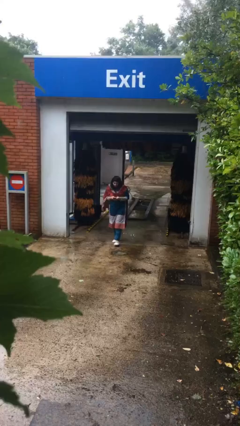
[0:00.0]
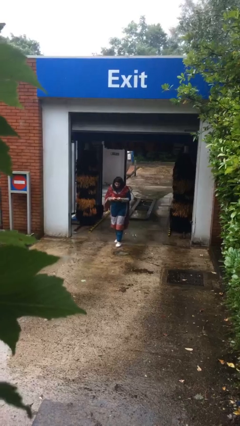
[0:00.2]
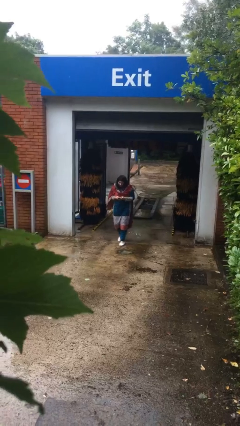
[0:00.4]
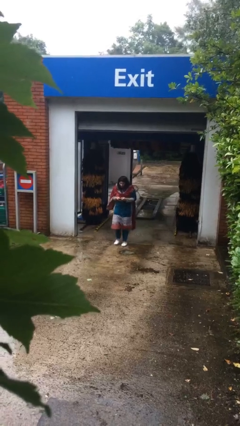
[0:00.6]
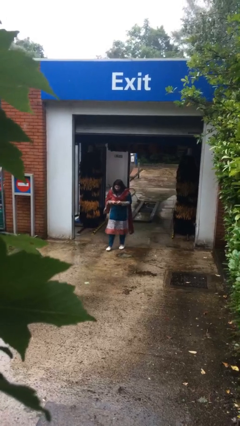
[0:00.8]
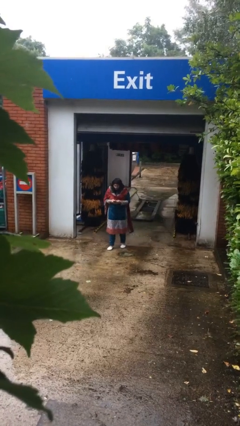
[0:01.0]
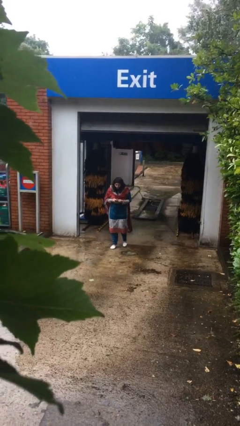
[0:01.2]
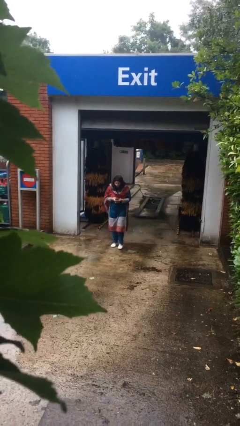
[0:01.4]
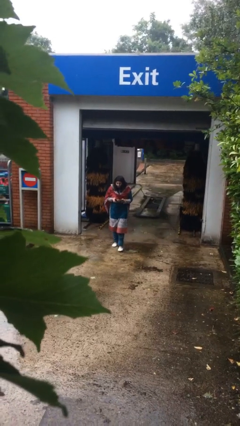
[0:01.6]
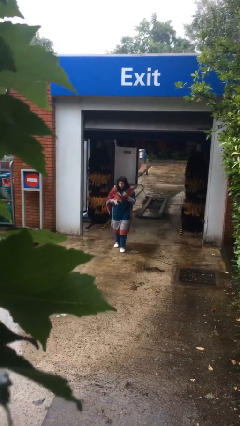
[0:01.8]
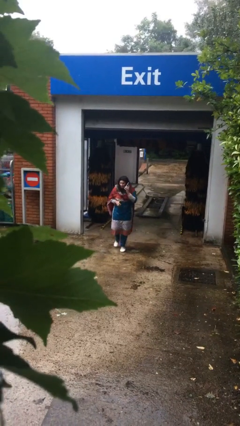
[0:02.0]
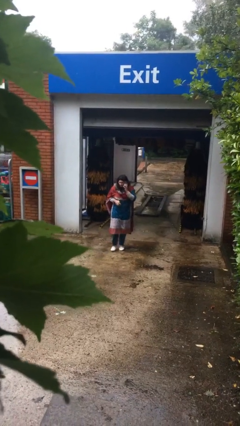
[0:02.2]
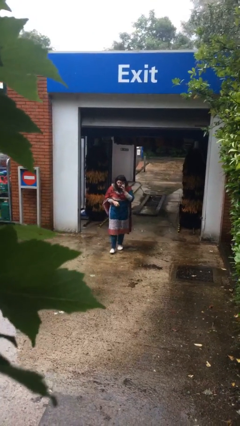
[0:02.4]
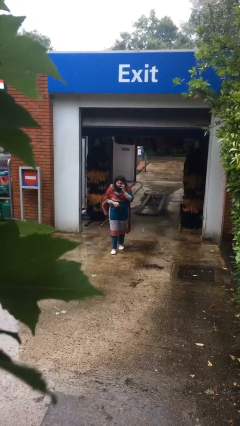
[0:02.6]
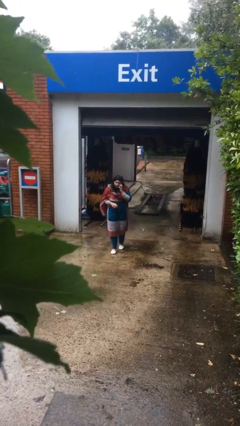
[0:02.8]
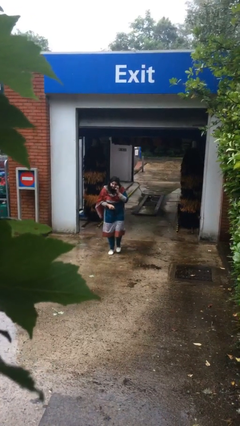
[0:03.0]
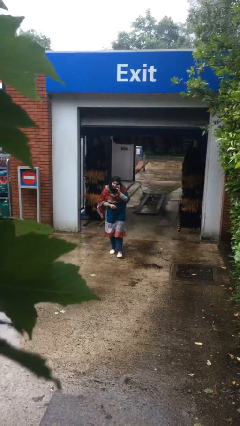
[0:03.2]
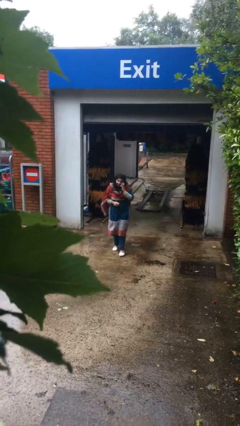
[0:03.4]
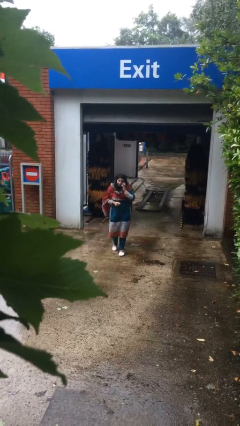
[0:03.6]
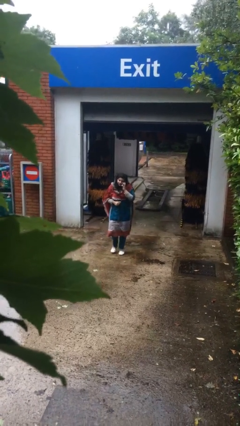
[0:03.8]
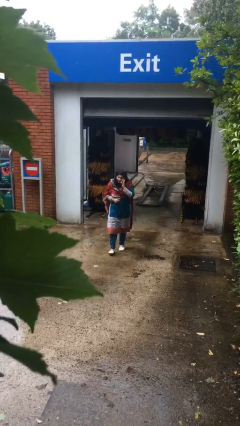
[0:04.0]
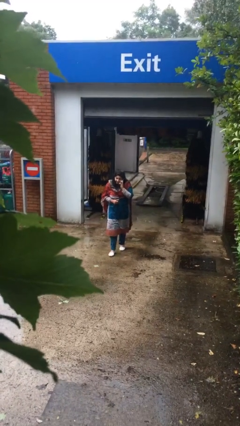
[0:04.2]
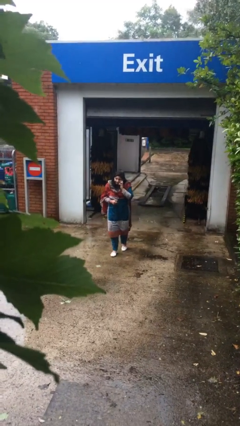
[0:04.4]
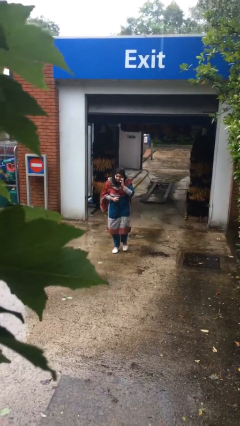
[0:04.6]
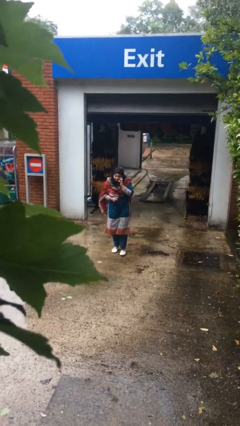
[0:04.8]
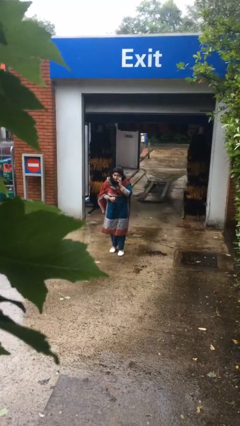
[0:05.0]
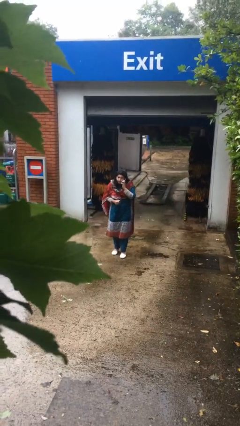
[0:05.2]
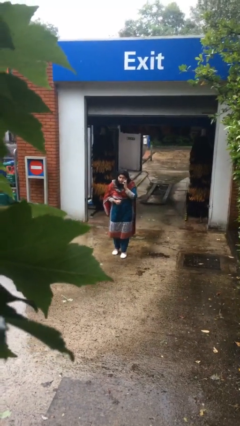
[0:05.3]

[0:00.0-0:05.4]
person talks on phone

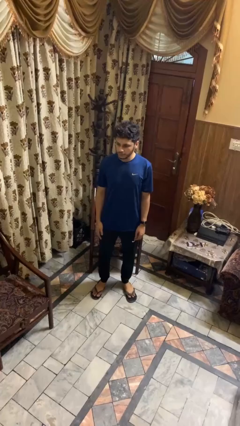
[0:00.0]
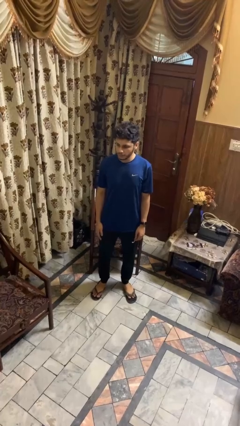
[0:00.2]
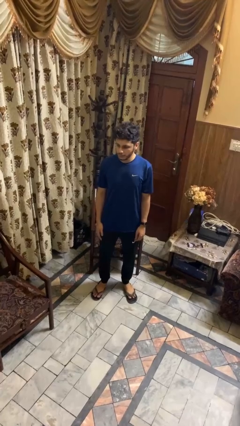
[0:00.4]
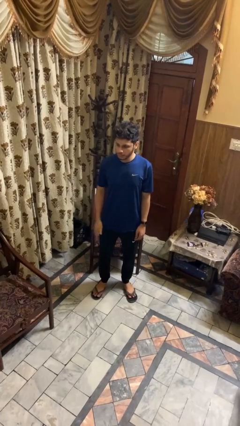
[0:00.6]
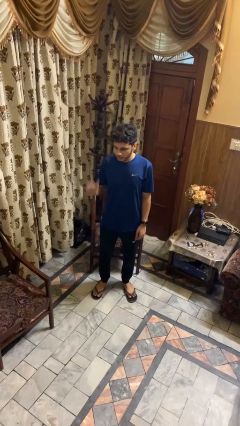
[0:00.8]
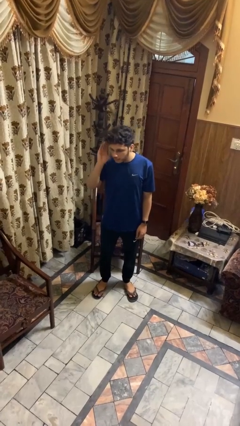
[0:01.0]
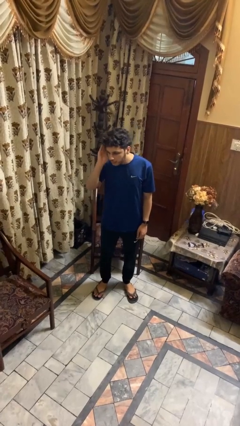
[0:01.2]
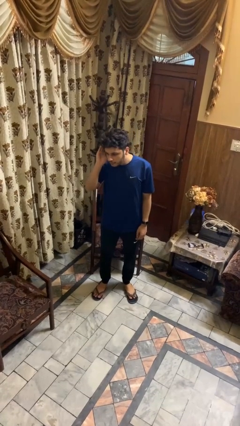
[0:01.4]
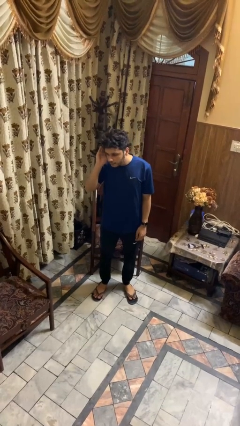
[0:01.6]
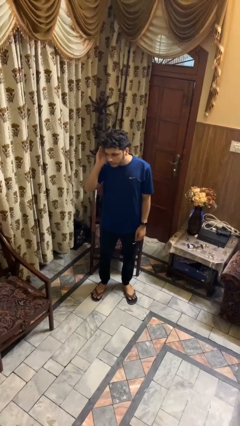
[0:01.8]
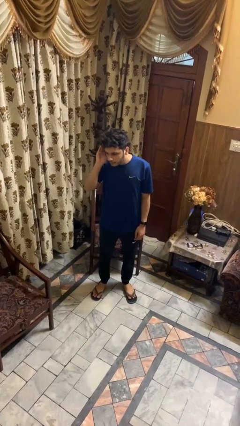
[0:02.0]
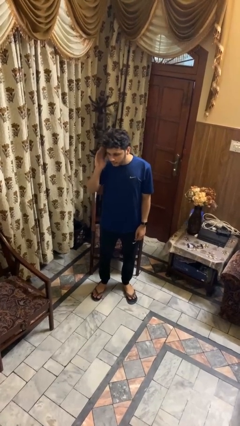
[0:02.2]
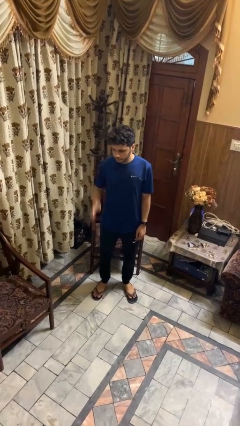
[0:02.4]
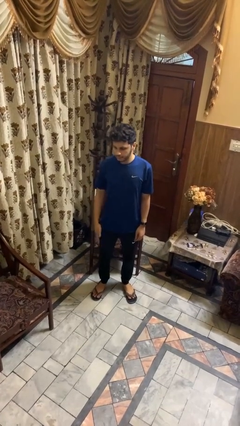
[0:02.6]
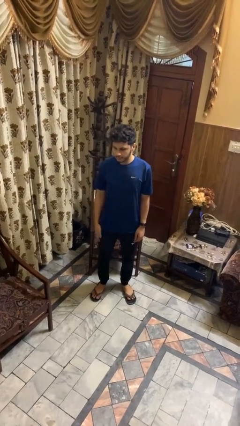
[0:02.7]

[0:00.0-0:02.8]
person gestures listen closely

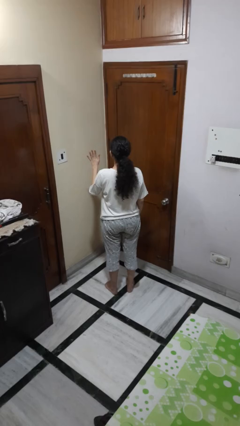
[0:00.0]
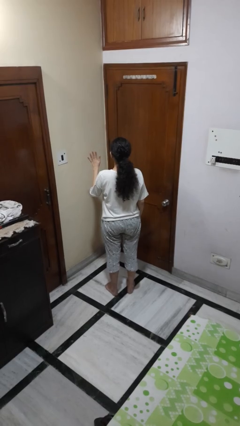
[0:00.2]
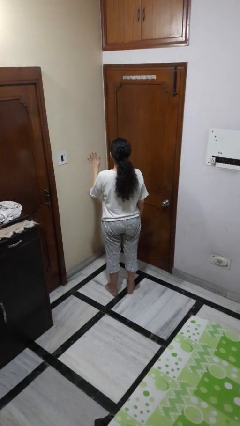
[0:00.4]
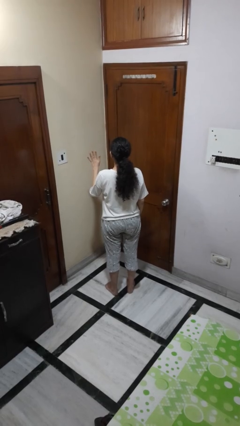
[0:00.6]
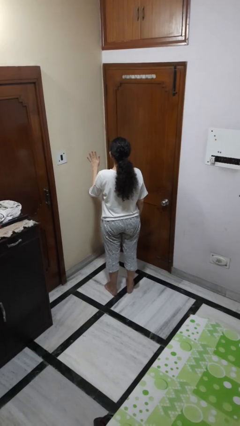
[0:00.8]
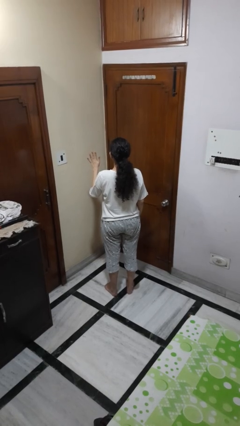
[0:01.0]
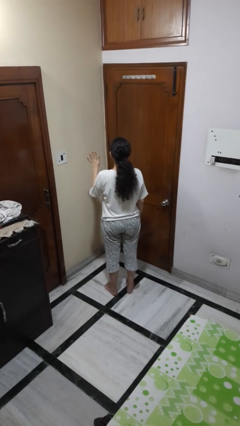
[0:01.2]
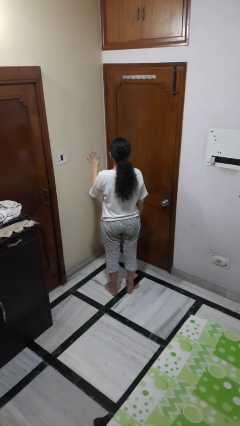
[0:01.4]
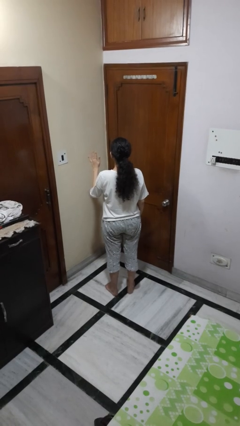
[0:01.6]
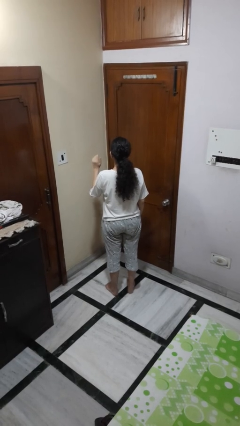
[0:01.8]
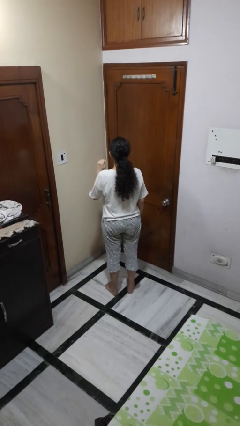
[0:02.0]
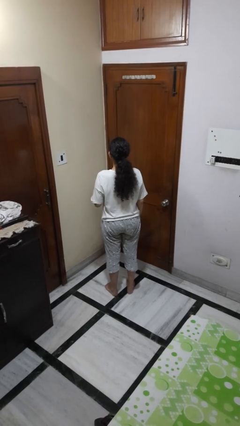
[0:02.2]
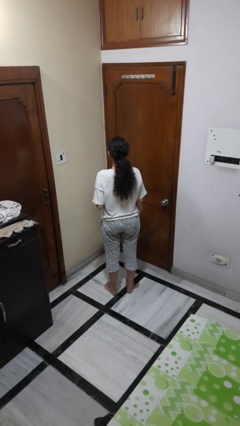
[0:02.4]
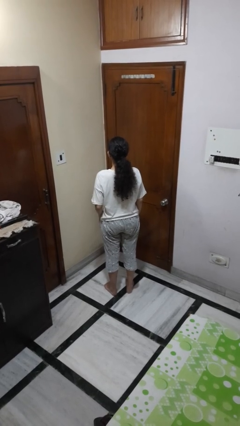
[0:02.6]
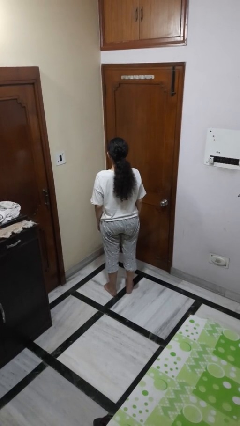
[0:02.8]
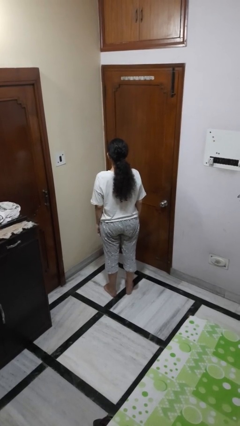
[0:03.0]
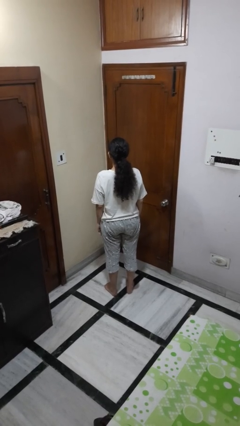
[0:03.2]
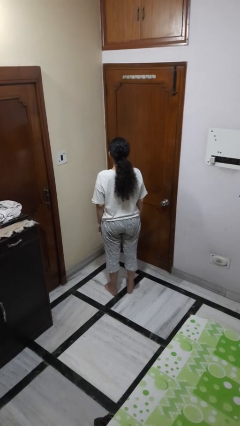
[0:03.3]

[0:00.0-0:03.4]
person gestures number five

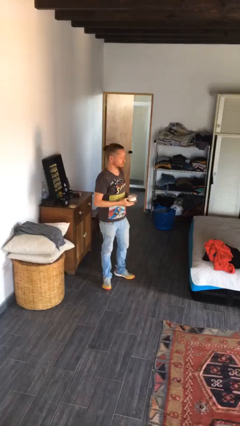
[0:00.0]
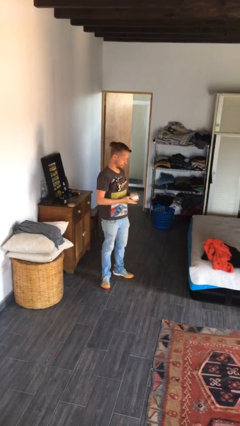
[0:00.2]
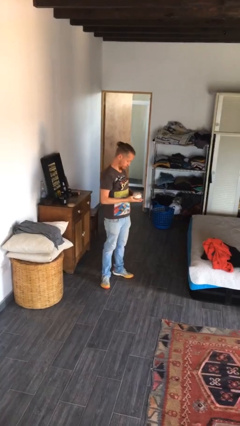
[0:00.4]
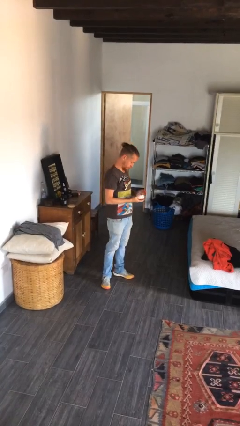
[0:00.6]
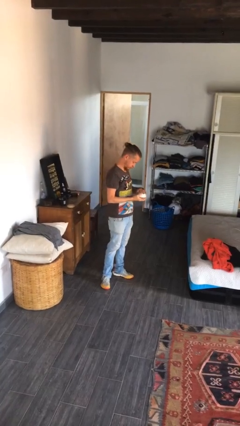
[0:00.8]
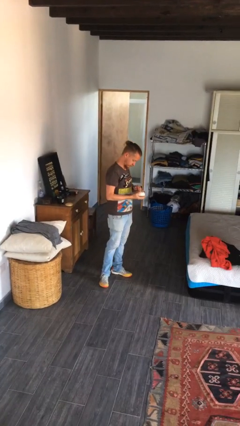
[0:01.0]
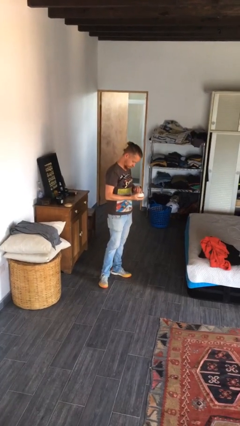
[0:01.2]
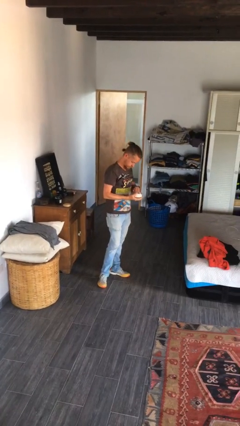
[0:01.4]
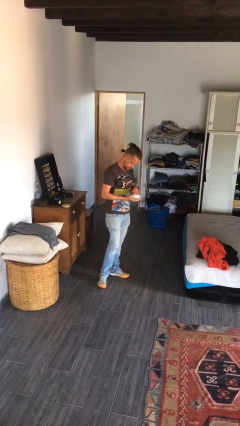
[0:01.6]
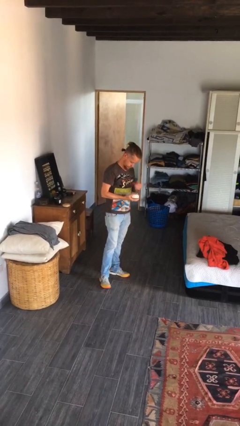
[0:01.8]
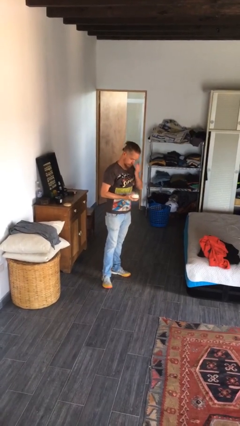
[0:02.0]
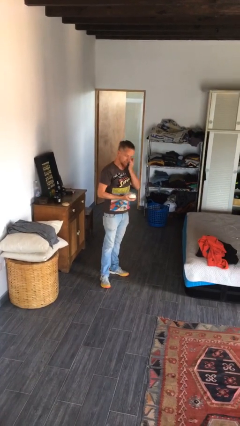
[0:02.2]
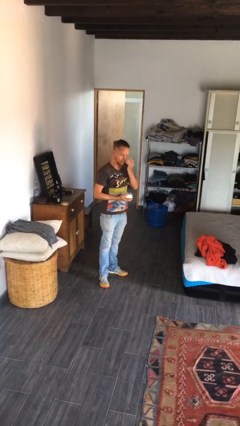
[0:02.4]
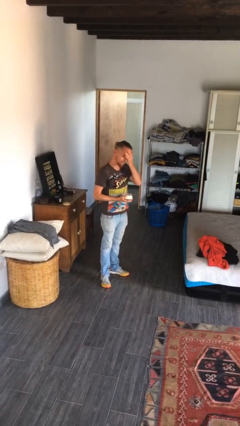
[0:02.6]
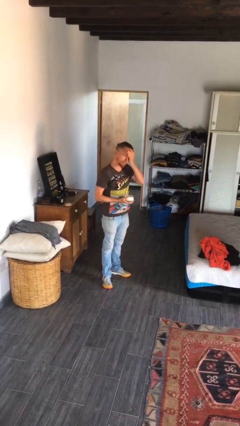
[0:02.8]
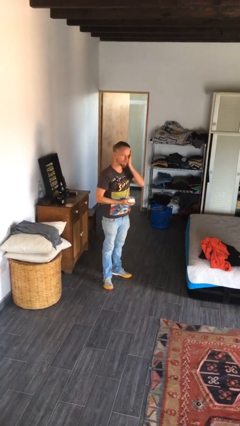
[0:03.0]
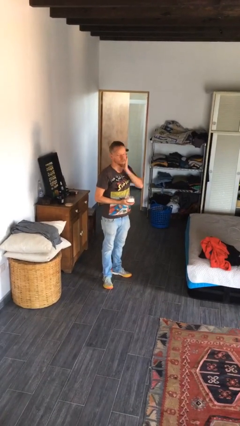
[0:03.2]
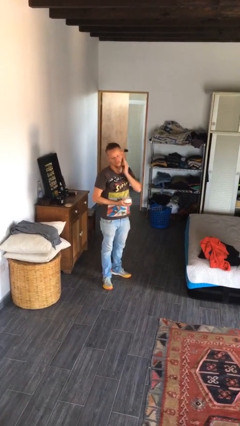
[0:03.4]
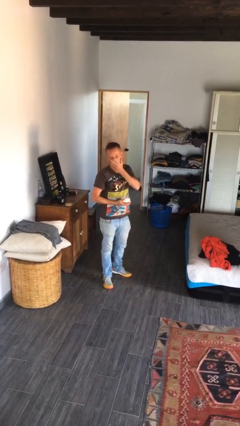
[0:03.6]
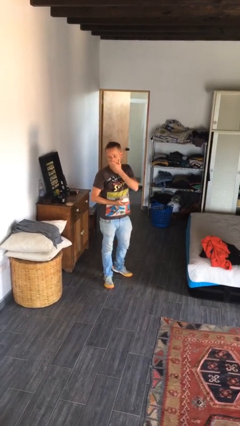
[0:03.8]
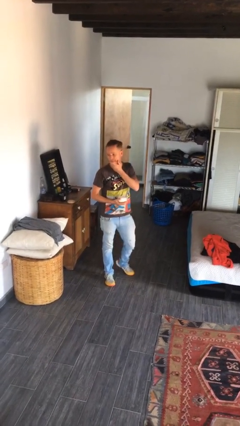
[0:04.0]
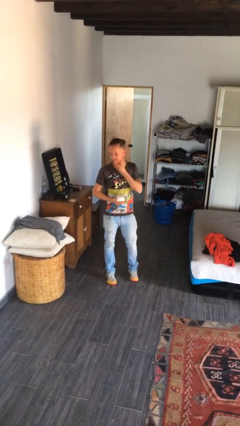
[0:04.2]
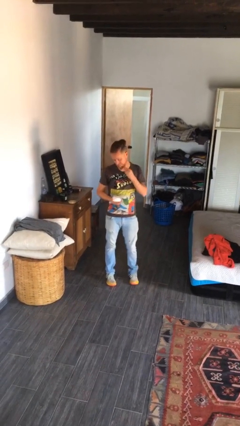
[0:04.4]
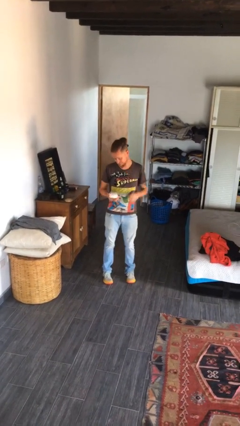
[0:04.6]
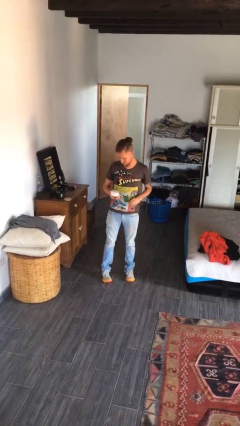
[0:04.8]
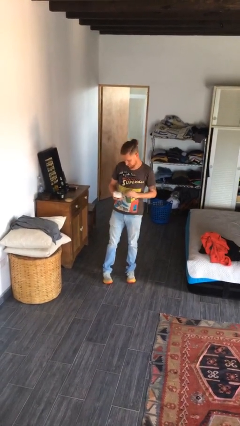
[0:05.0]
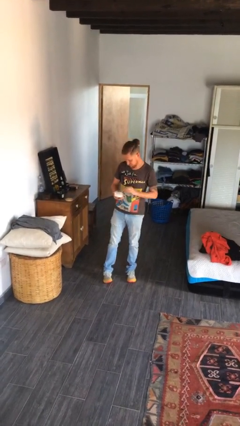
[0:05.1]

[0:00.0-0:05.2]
person applies facial moisturizer

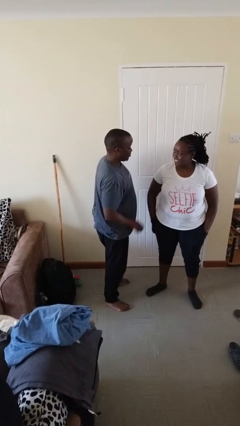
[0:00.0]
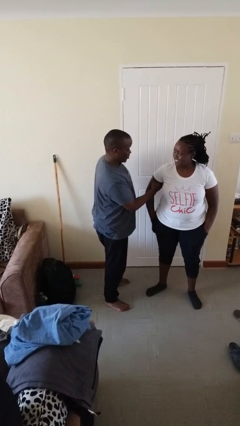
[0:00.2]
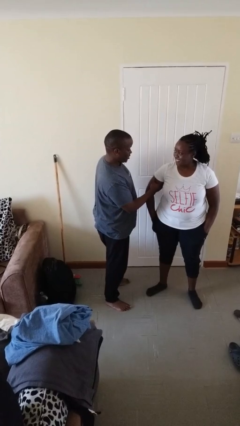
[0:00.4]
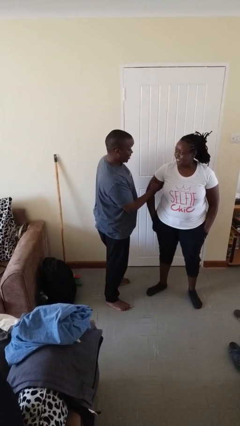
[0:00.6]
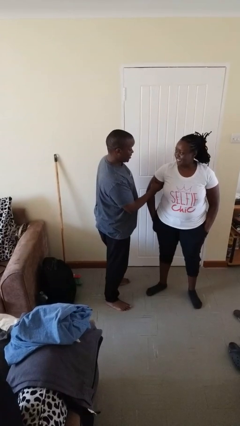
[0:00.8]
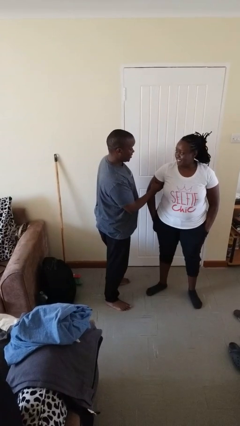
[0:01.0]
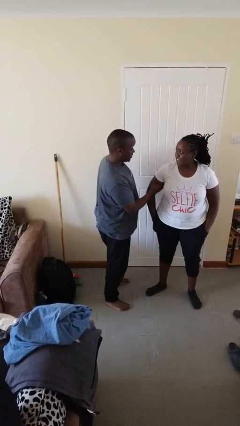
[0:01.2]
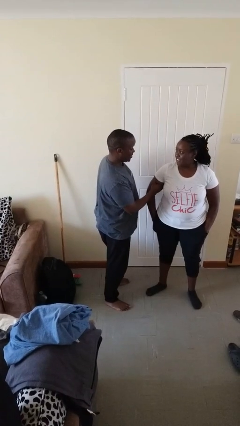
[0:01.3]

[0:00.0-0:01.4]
person grabs person by bicep
